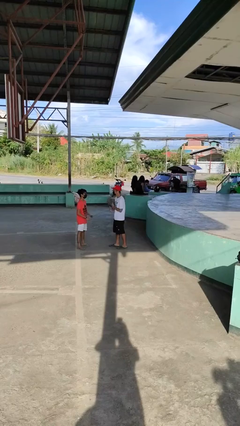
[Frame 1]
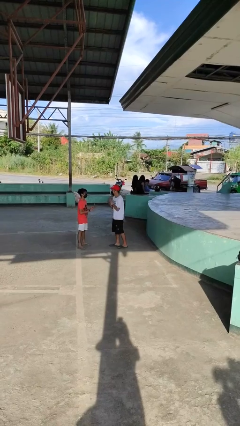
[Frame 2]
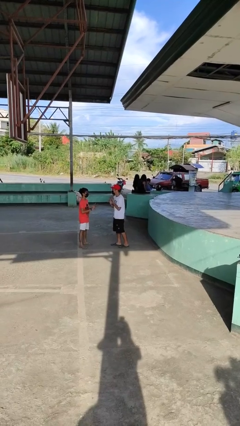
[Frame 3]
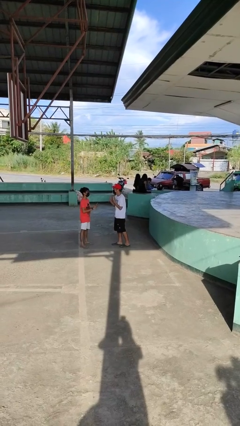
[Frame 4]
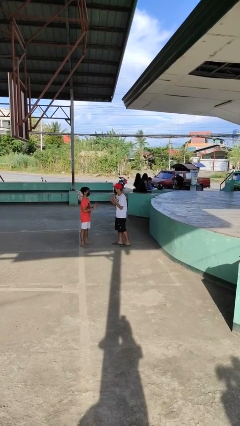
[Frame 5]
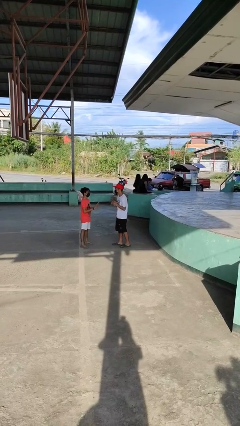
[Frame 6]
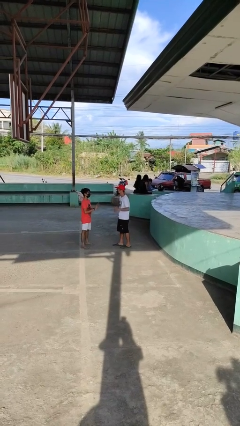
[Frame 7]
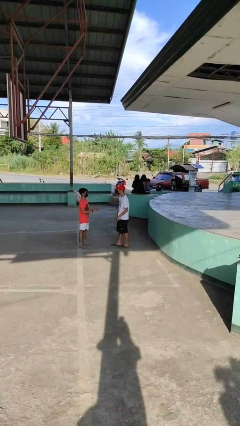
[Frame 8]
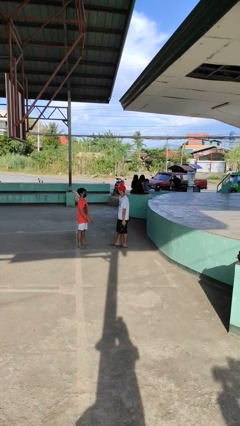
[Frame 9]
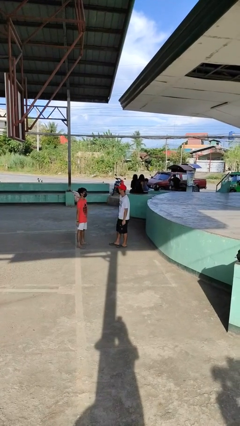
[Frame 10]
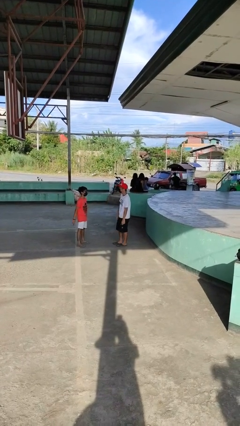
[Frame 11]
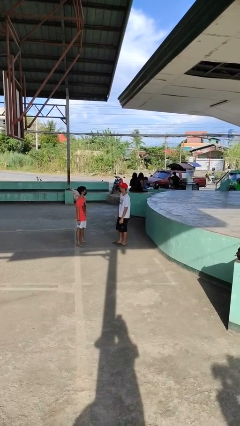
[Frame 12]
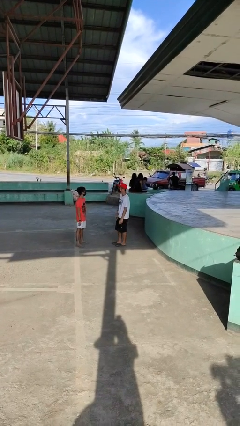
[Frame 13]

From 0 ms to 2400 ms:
person talks to person

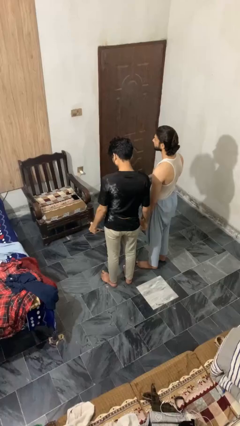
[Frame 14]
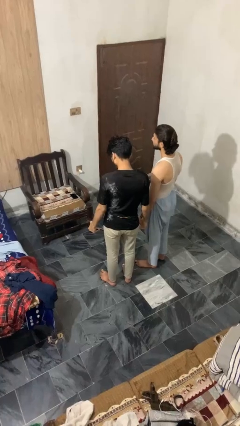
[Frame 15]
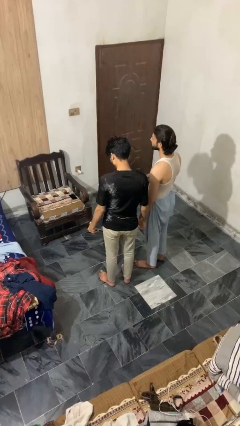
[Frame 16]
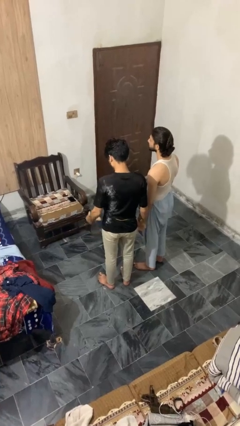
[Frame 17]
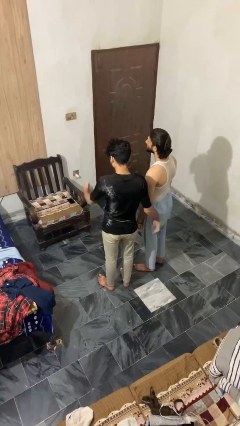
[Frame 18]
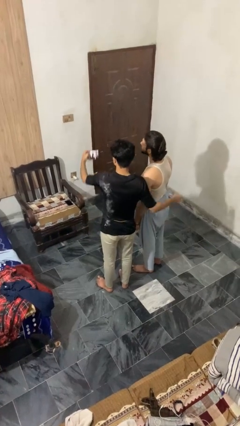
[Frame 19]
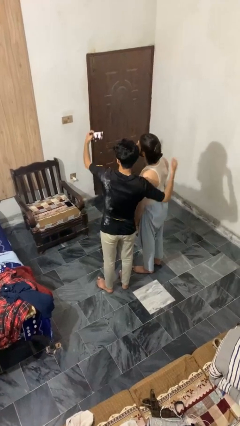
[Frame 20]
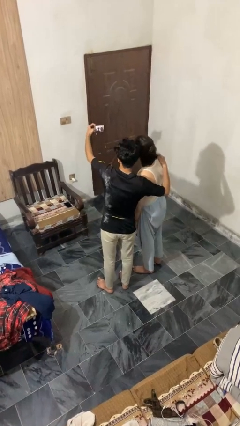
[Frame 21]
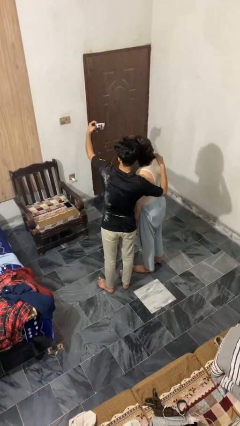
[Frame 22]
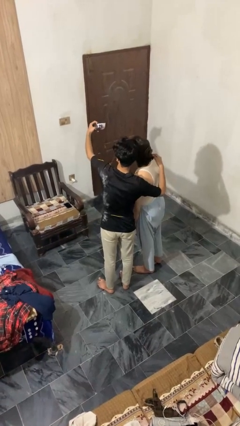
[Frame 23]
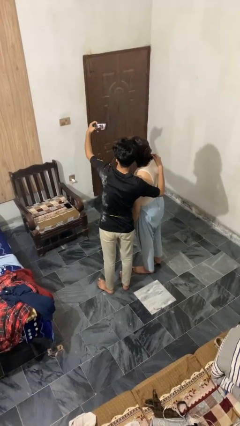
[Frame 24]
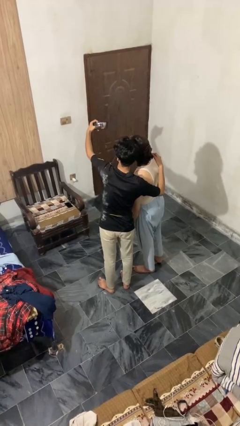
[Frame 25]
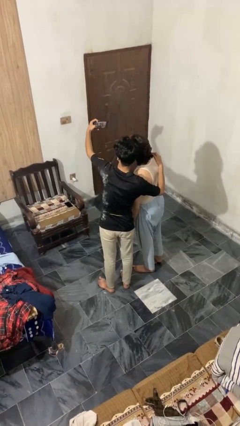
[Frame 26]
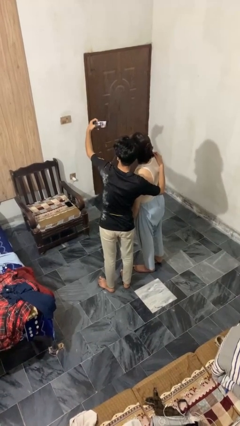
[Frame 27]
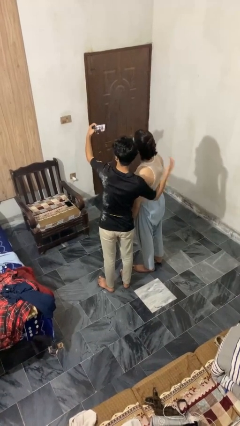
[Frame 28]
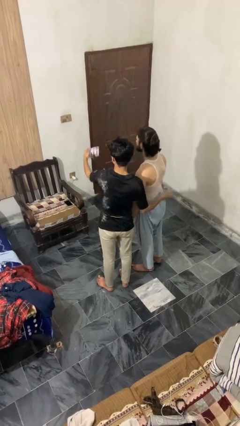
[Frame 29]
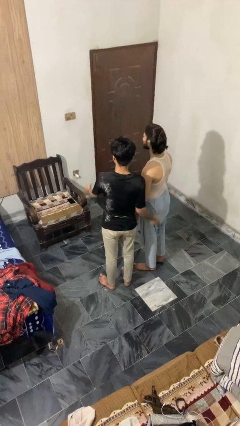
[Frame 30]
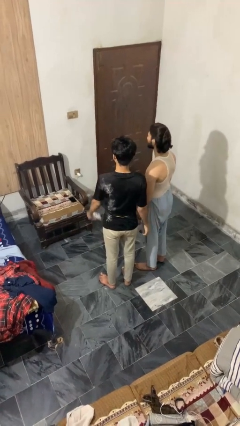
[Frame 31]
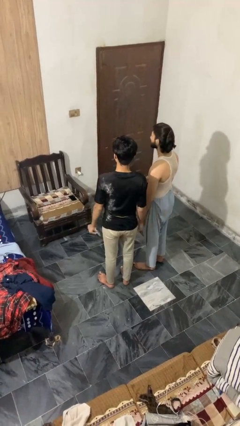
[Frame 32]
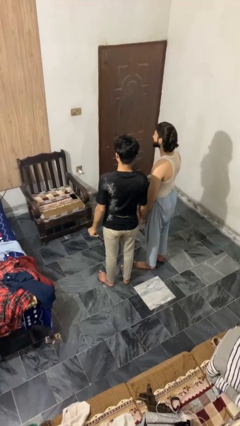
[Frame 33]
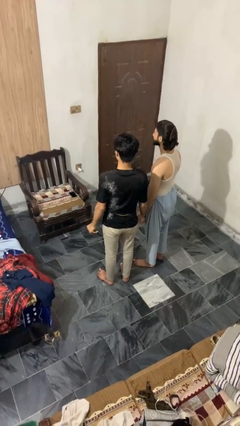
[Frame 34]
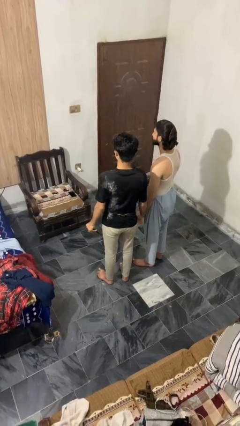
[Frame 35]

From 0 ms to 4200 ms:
person takes selfie with person

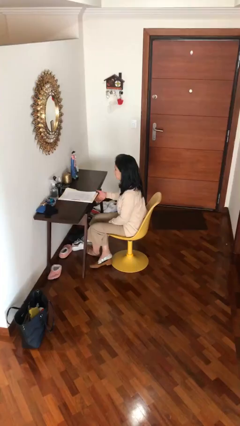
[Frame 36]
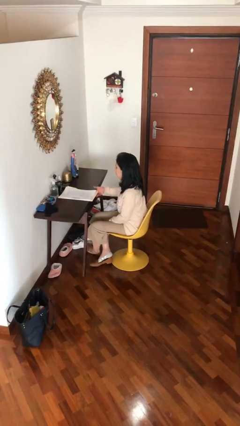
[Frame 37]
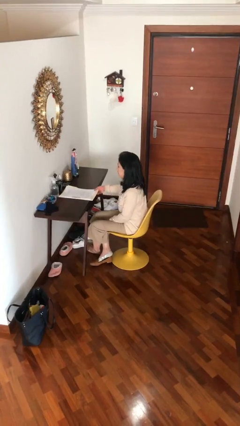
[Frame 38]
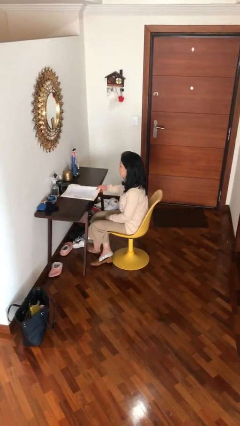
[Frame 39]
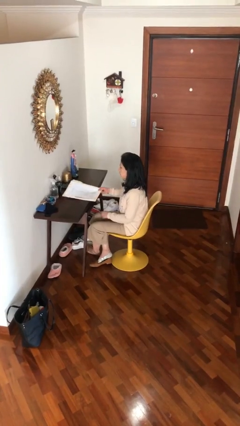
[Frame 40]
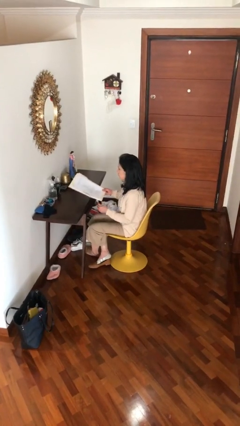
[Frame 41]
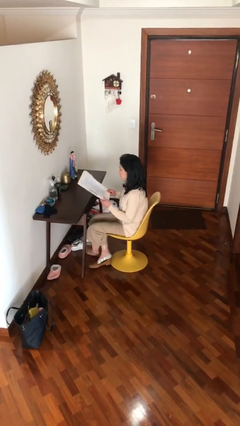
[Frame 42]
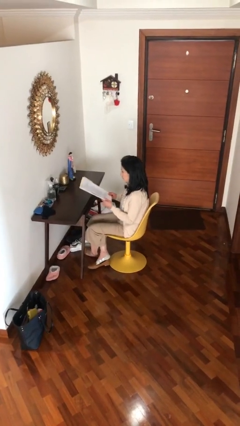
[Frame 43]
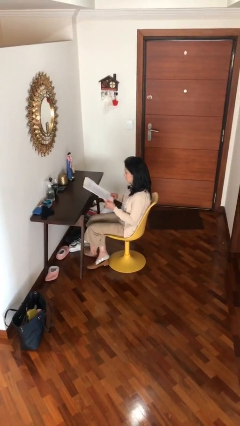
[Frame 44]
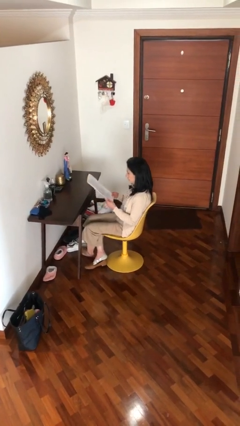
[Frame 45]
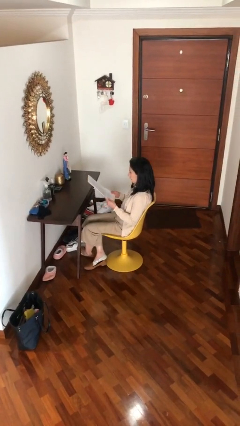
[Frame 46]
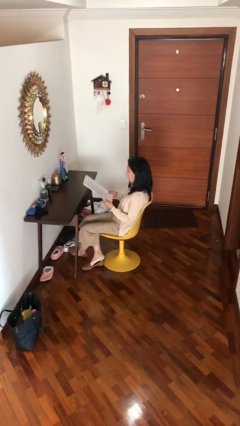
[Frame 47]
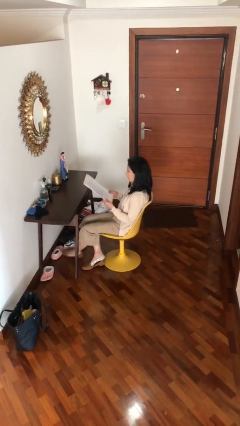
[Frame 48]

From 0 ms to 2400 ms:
person picks up object from table

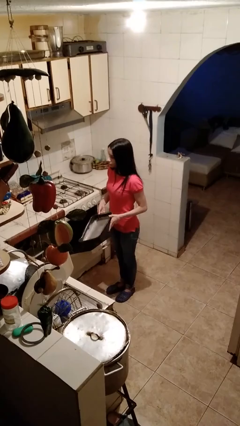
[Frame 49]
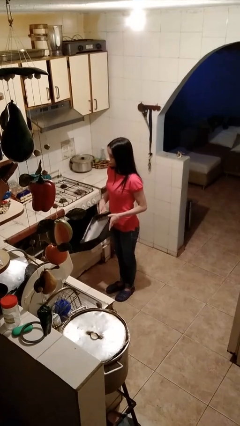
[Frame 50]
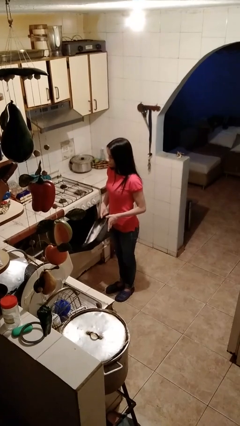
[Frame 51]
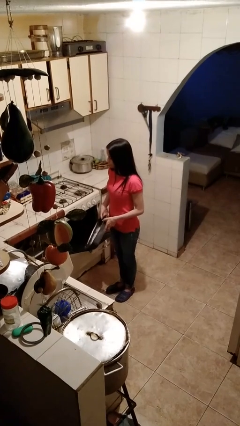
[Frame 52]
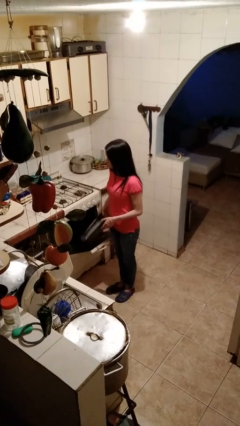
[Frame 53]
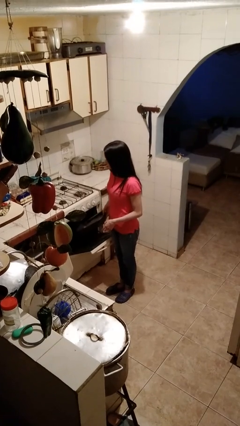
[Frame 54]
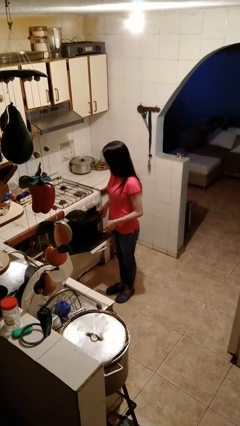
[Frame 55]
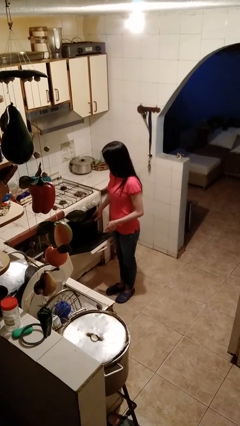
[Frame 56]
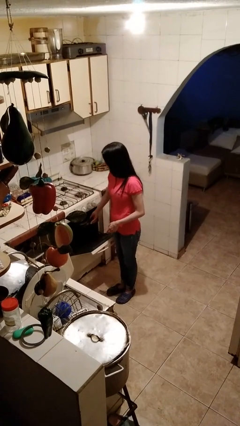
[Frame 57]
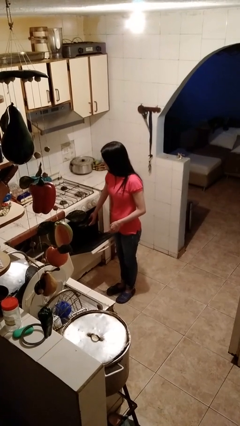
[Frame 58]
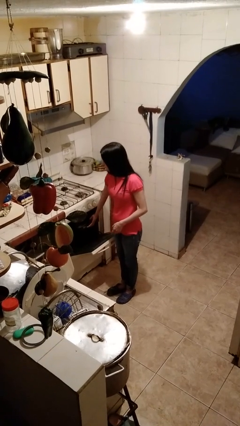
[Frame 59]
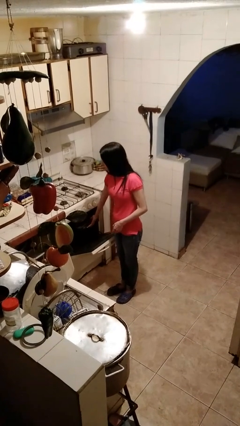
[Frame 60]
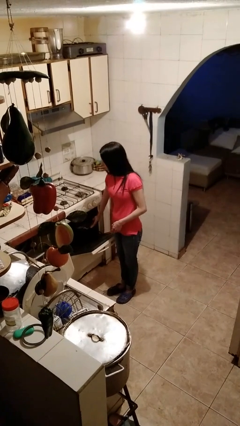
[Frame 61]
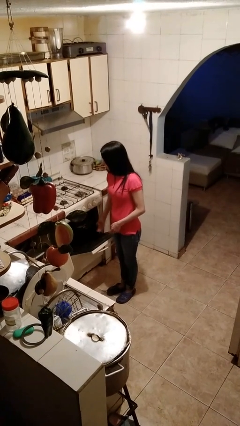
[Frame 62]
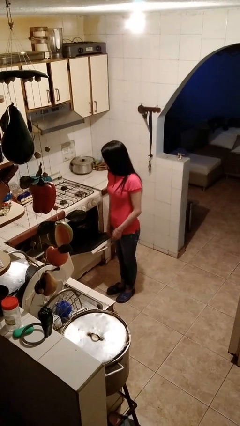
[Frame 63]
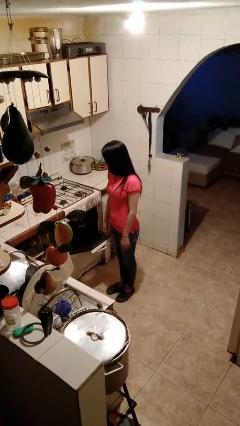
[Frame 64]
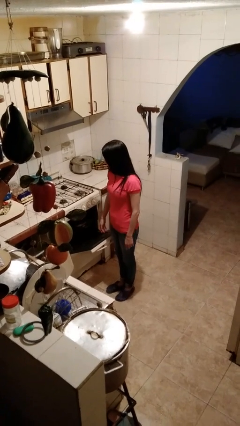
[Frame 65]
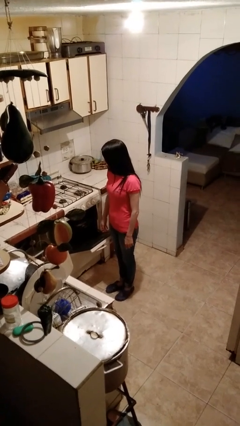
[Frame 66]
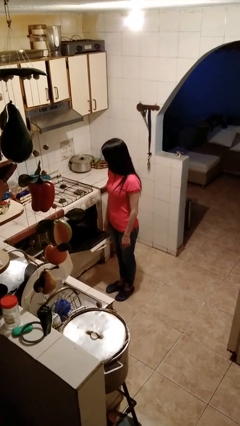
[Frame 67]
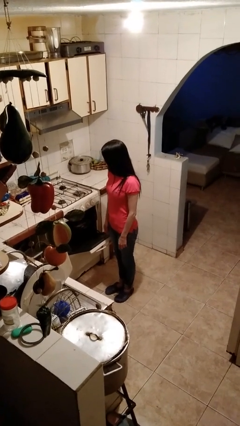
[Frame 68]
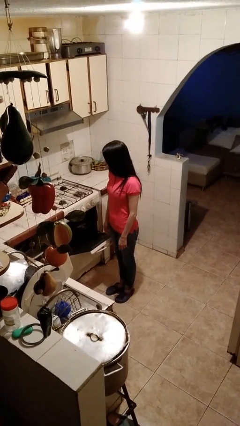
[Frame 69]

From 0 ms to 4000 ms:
person puts object into oven

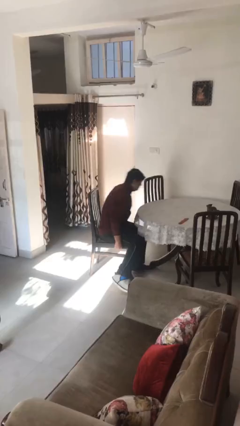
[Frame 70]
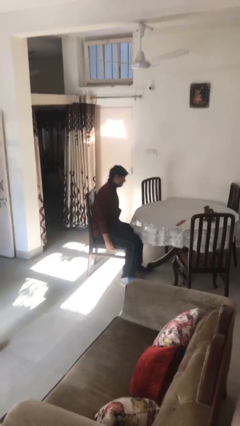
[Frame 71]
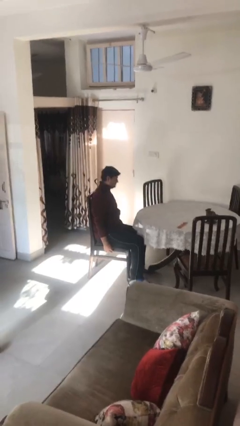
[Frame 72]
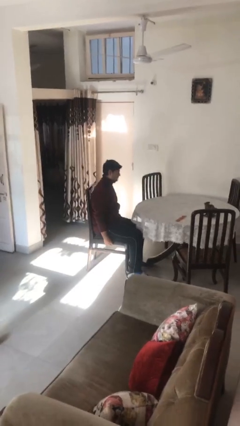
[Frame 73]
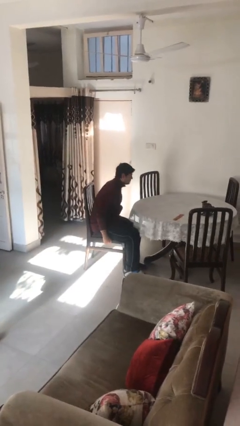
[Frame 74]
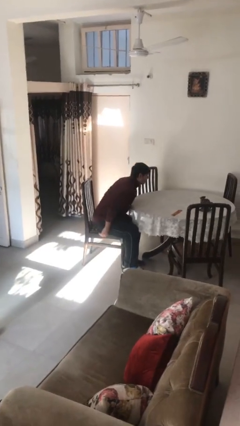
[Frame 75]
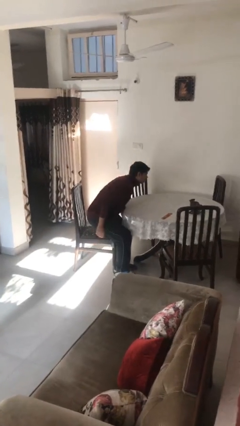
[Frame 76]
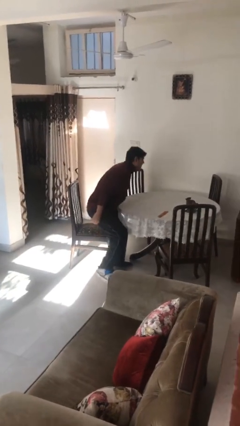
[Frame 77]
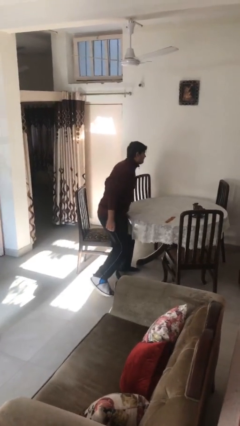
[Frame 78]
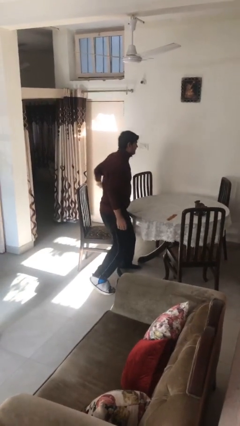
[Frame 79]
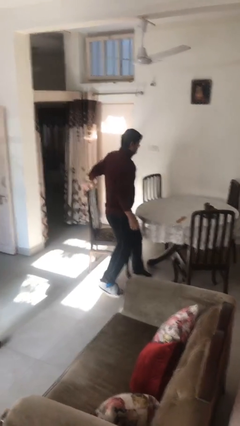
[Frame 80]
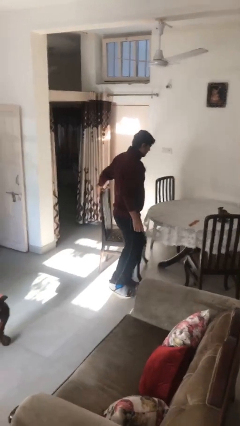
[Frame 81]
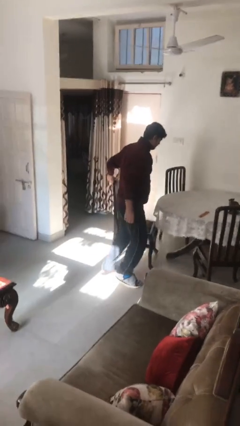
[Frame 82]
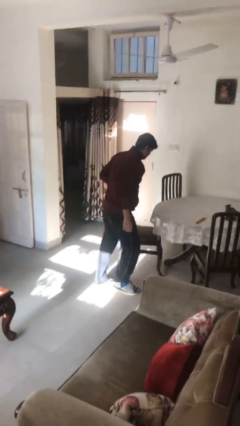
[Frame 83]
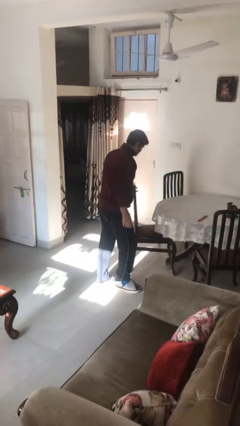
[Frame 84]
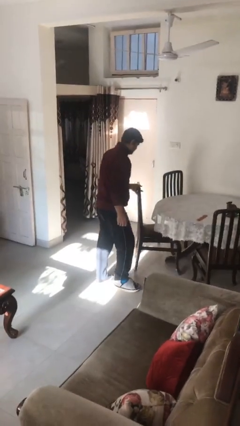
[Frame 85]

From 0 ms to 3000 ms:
person stands up

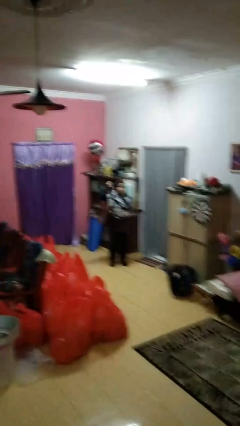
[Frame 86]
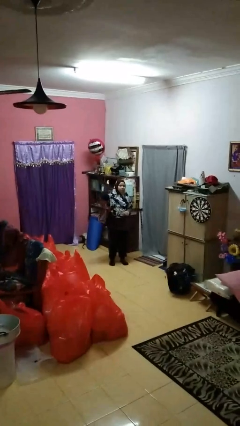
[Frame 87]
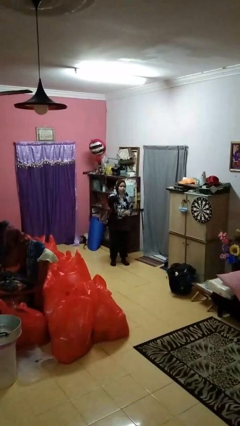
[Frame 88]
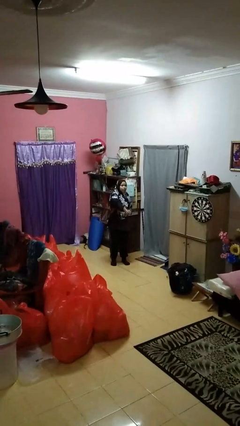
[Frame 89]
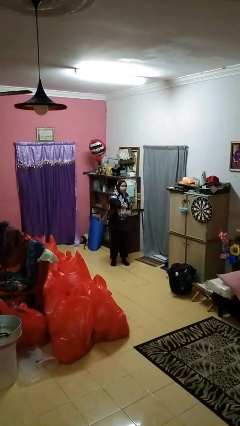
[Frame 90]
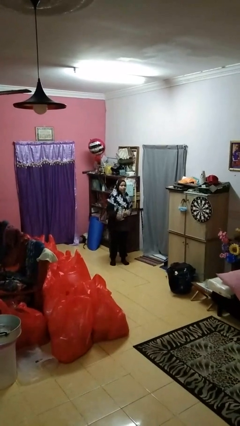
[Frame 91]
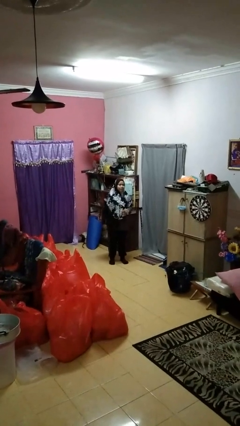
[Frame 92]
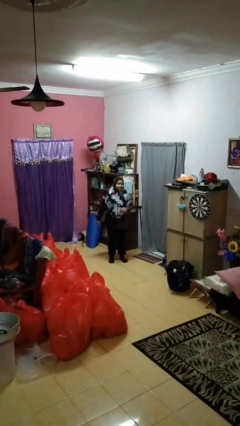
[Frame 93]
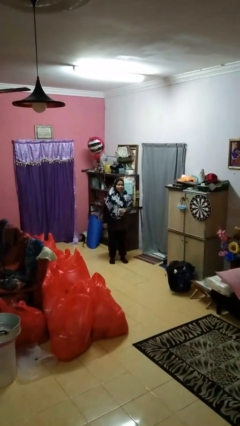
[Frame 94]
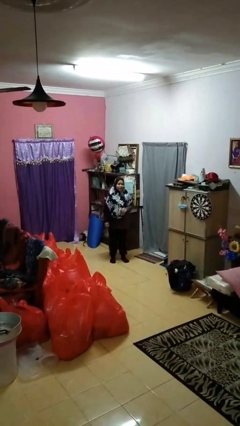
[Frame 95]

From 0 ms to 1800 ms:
person karate chop
